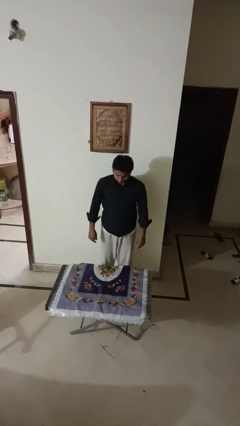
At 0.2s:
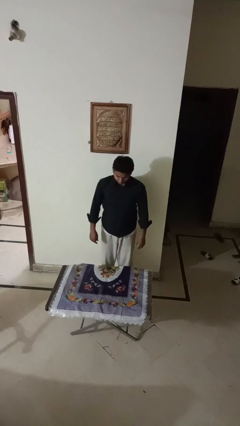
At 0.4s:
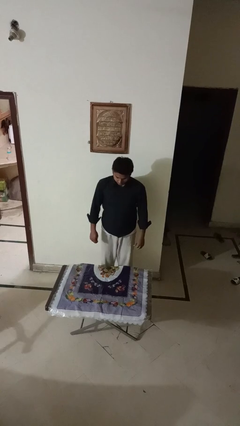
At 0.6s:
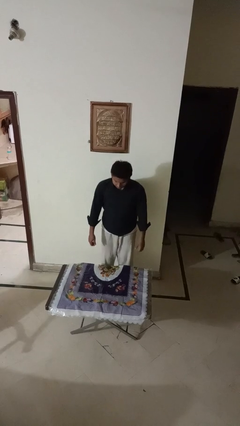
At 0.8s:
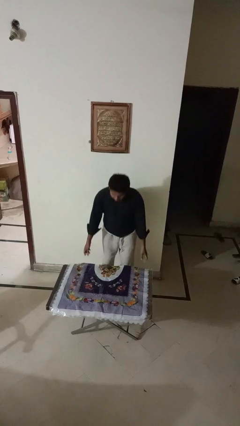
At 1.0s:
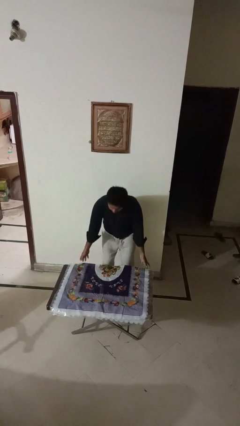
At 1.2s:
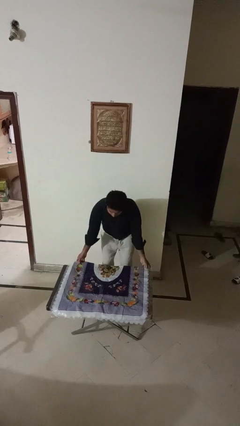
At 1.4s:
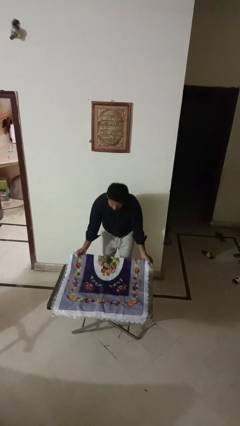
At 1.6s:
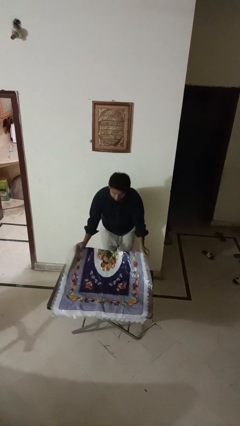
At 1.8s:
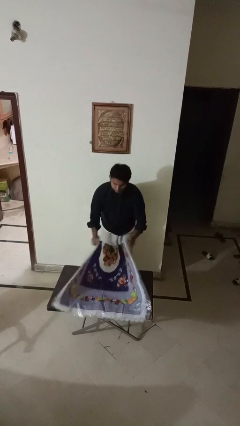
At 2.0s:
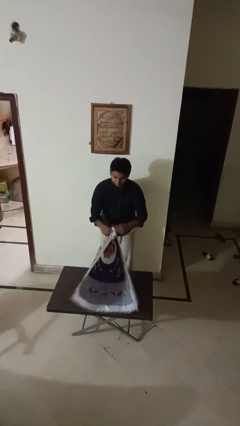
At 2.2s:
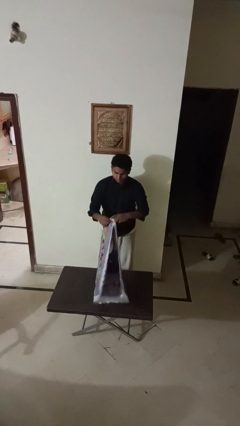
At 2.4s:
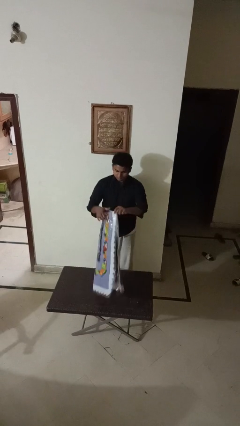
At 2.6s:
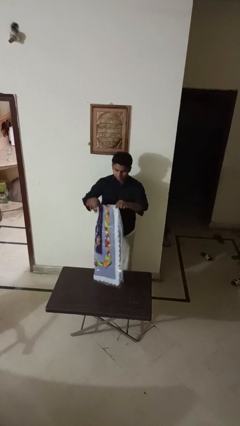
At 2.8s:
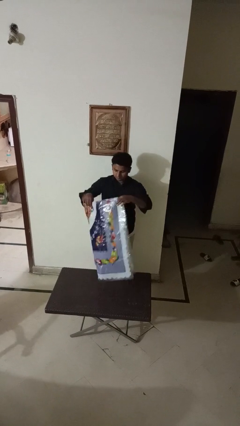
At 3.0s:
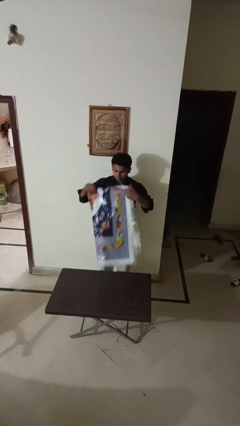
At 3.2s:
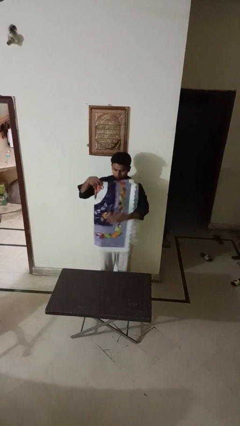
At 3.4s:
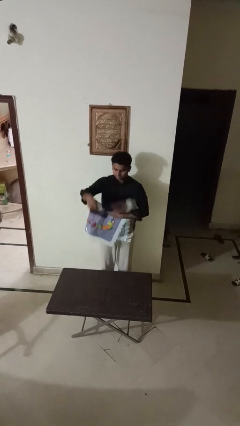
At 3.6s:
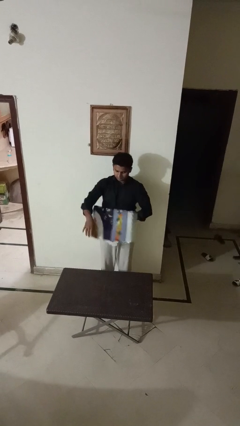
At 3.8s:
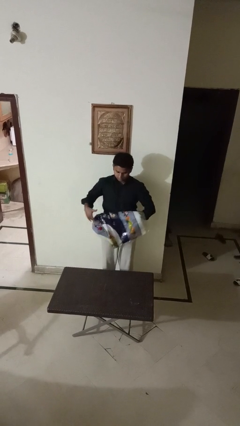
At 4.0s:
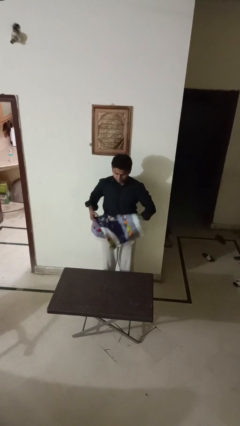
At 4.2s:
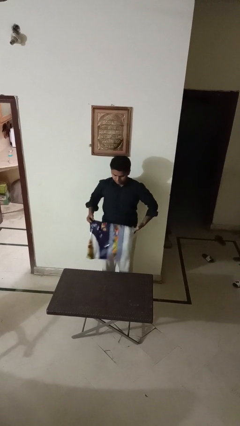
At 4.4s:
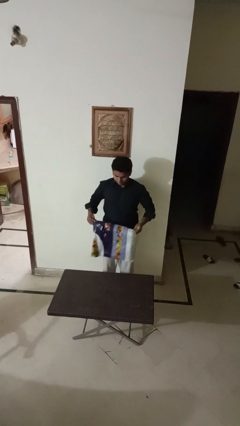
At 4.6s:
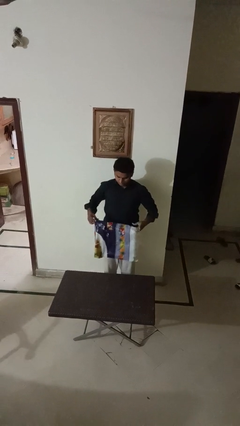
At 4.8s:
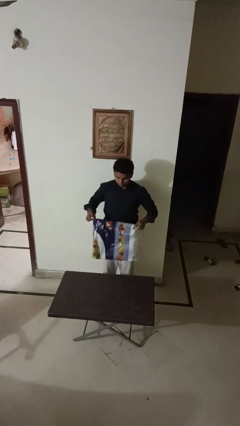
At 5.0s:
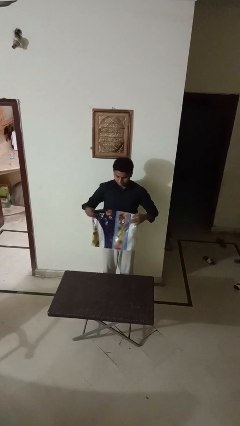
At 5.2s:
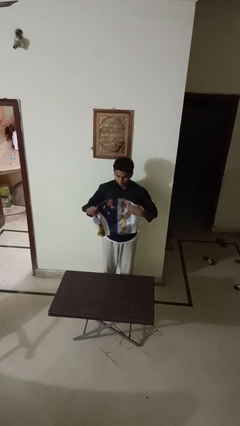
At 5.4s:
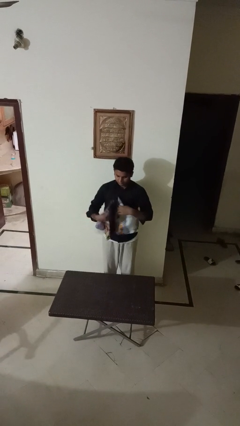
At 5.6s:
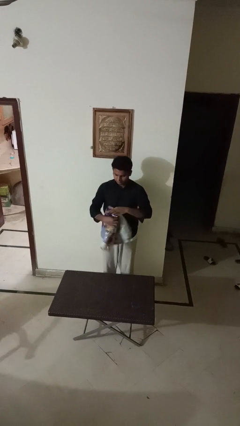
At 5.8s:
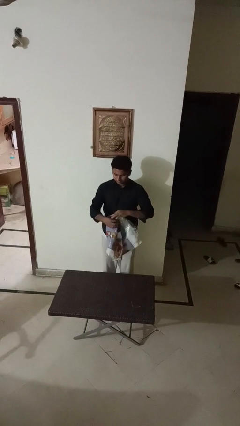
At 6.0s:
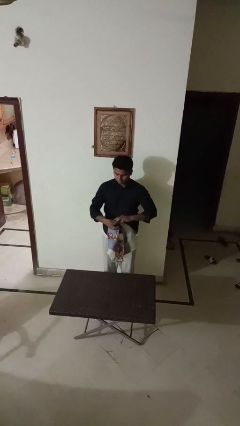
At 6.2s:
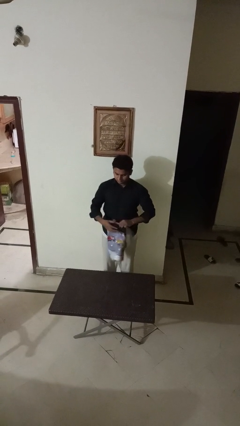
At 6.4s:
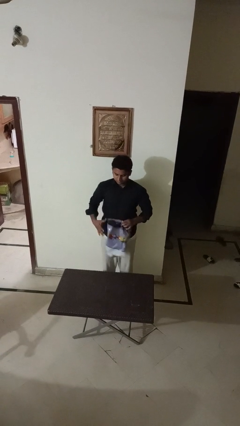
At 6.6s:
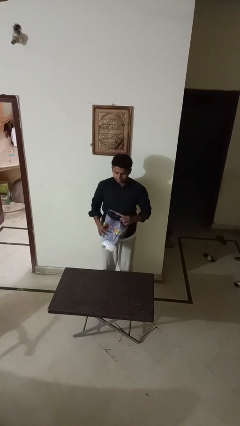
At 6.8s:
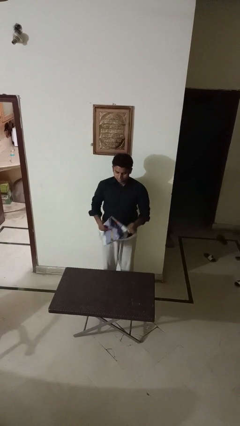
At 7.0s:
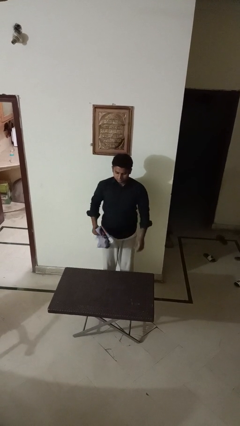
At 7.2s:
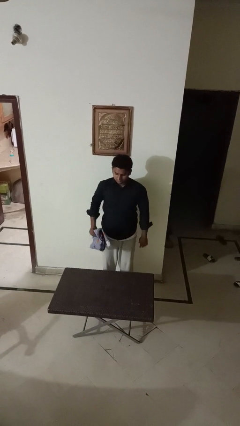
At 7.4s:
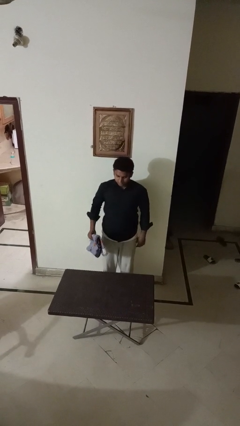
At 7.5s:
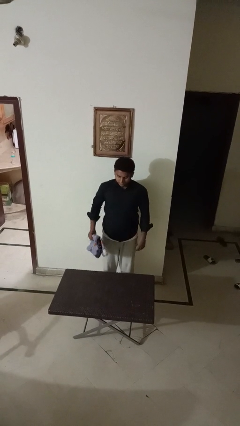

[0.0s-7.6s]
person folds tablecloth

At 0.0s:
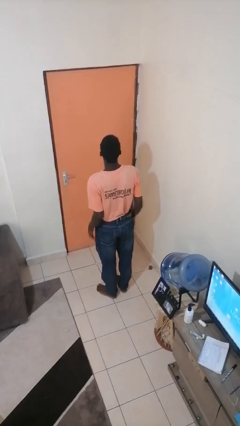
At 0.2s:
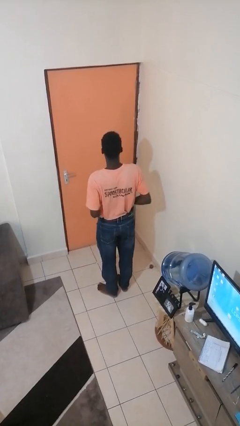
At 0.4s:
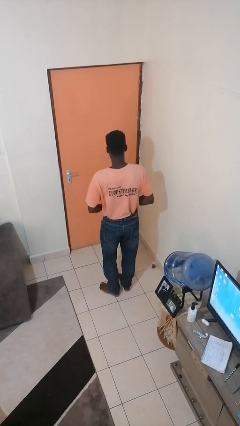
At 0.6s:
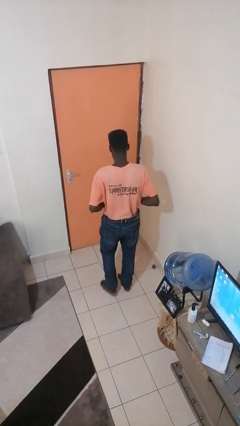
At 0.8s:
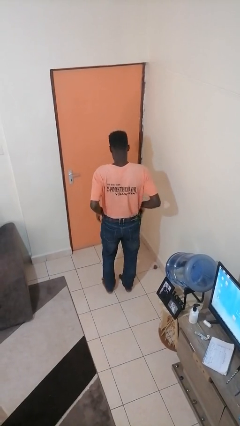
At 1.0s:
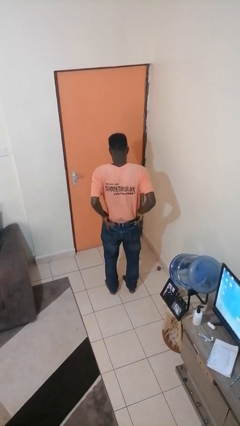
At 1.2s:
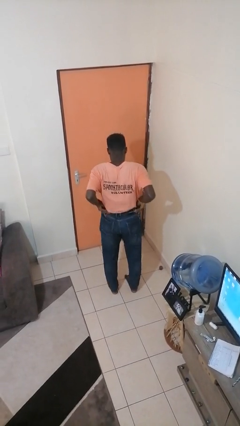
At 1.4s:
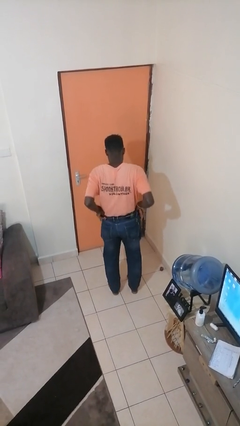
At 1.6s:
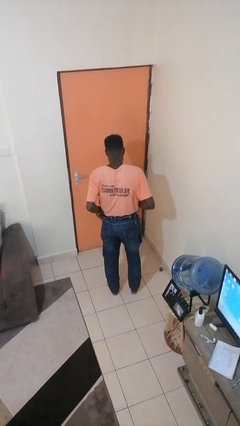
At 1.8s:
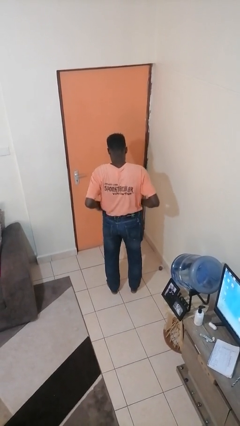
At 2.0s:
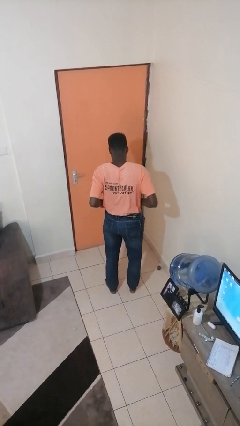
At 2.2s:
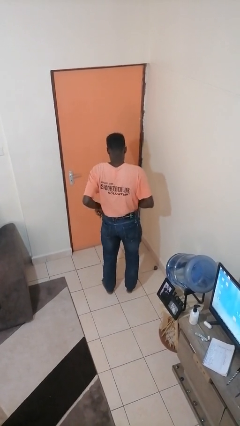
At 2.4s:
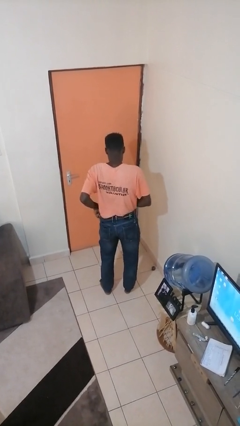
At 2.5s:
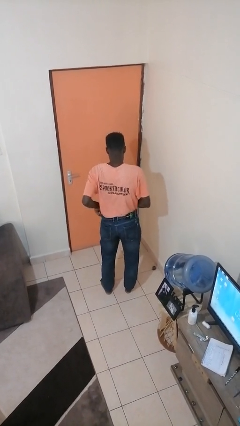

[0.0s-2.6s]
person hikes up pants

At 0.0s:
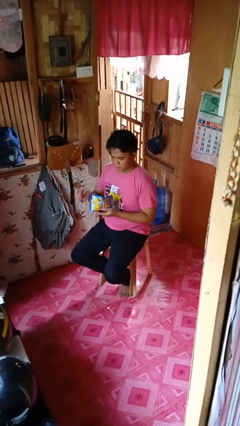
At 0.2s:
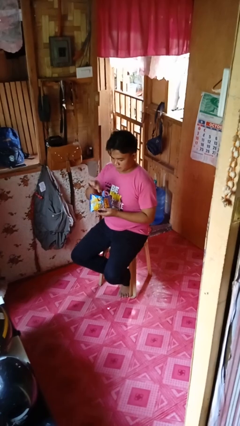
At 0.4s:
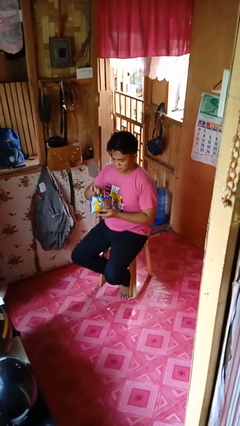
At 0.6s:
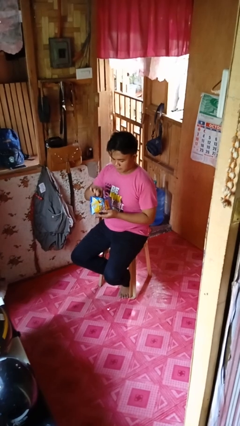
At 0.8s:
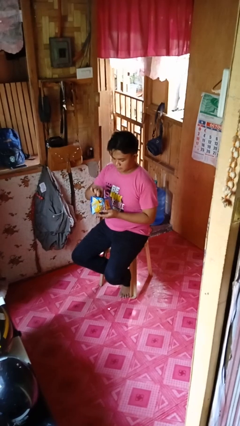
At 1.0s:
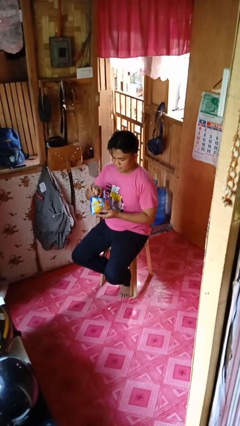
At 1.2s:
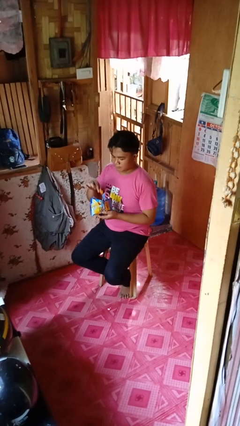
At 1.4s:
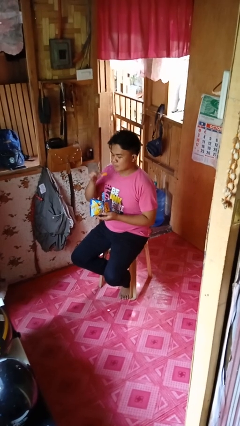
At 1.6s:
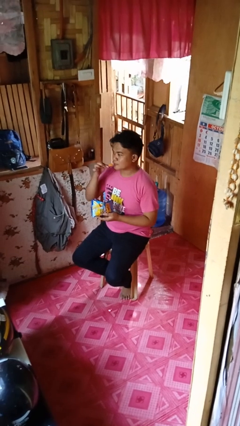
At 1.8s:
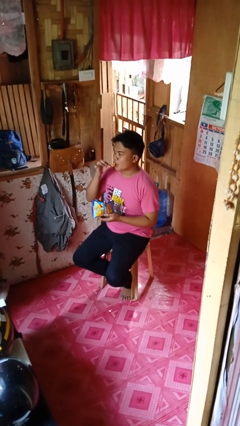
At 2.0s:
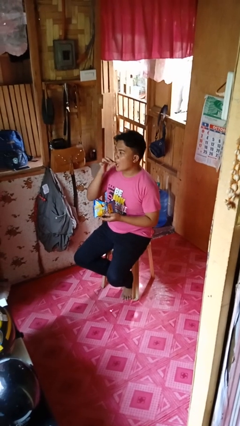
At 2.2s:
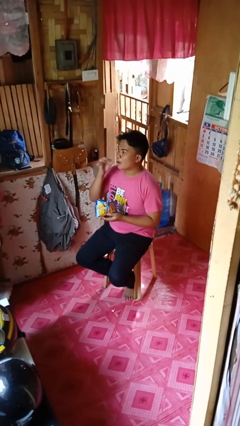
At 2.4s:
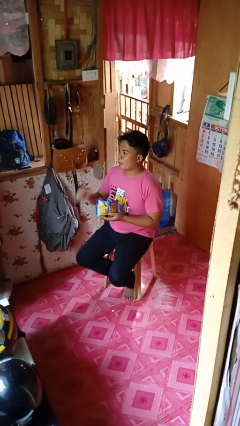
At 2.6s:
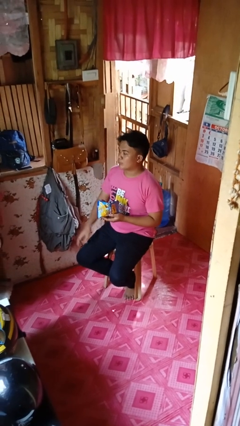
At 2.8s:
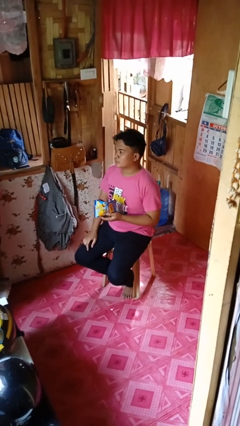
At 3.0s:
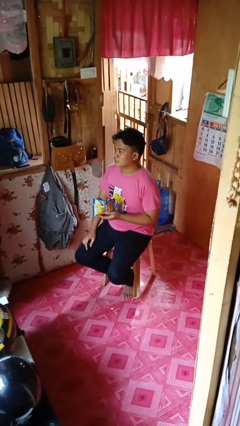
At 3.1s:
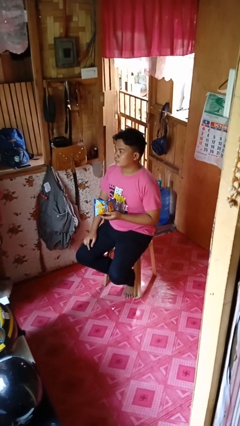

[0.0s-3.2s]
person eats snack from bag

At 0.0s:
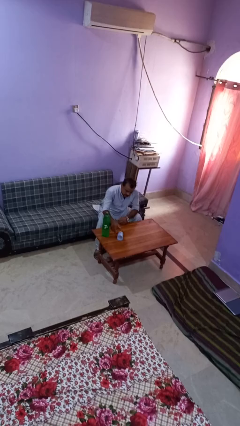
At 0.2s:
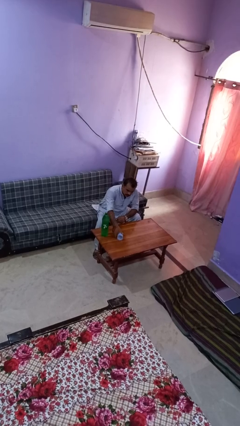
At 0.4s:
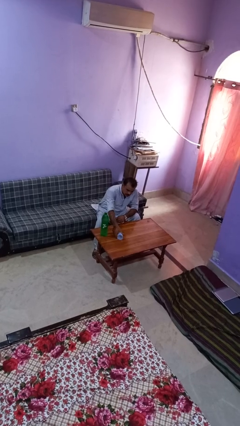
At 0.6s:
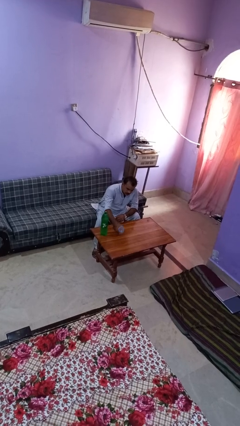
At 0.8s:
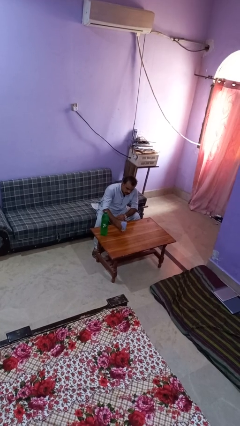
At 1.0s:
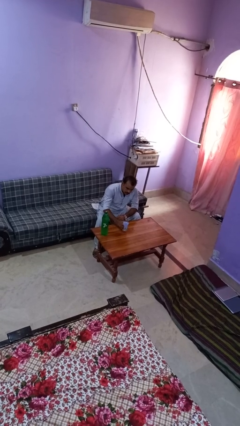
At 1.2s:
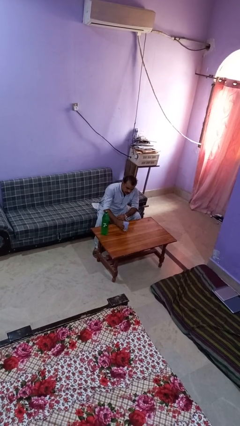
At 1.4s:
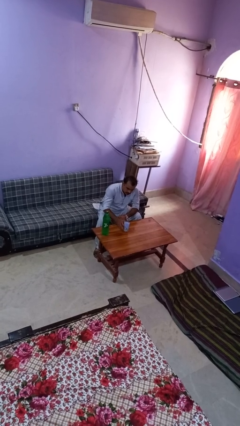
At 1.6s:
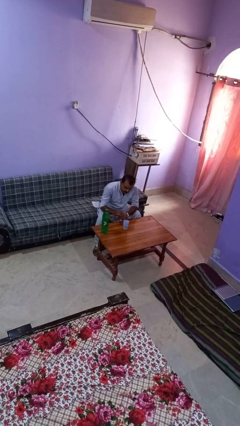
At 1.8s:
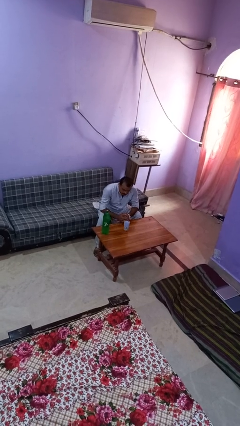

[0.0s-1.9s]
person sets upright glass

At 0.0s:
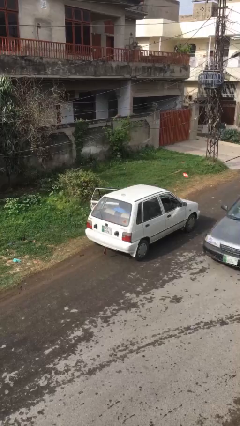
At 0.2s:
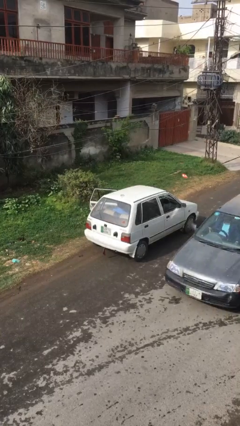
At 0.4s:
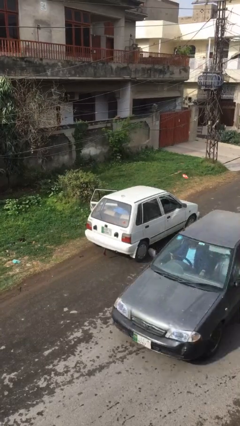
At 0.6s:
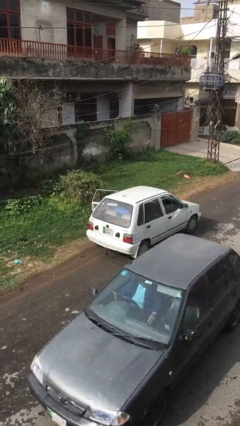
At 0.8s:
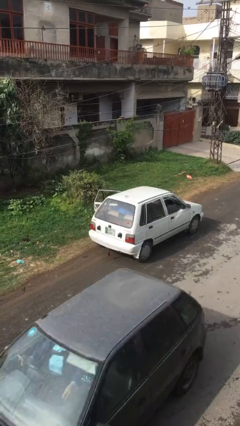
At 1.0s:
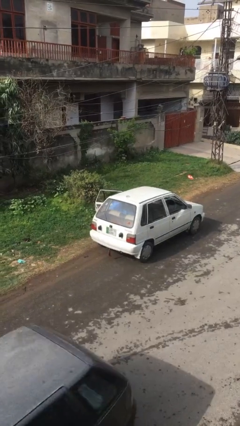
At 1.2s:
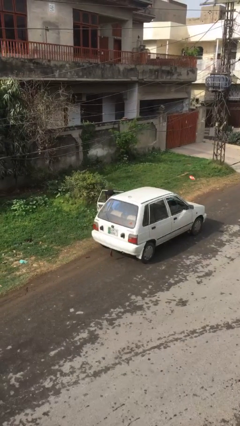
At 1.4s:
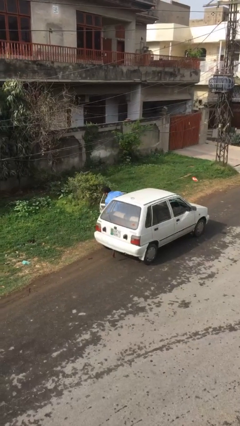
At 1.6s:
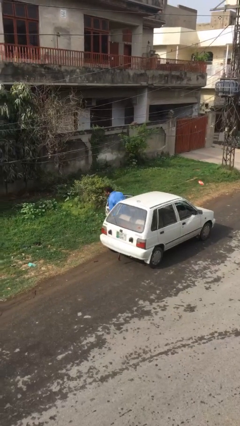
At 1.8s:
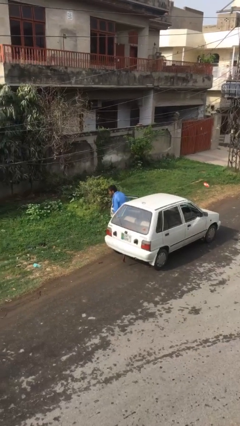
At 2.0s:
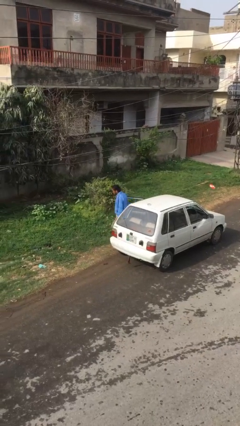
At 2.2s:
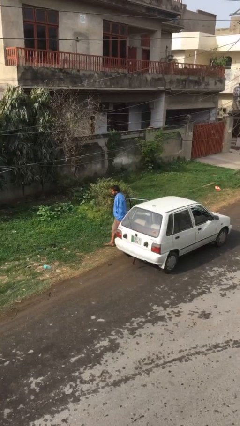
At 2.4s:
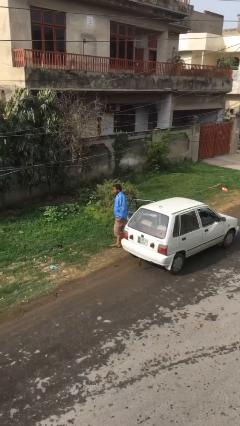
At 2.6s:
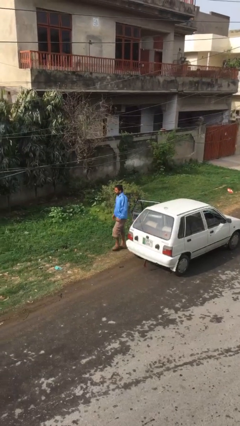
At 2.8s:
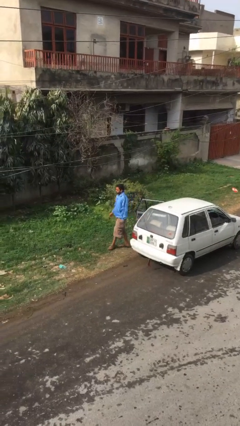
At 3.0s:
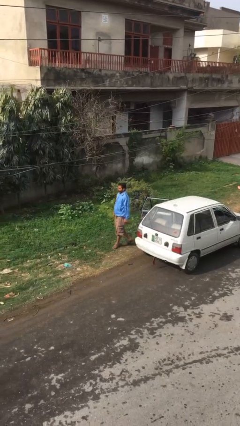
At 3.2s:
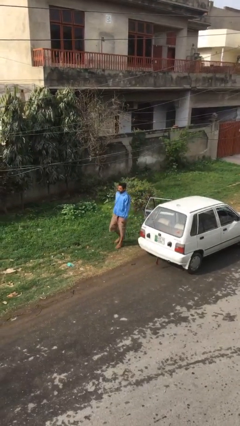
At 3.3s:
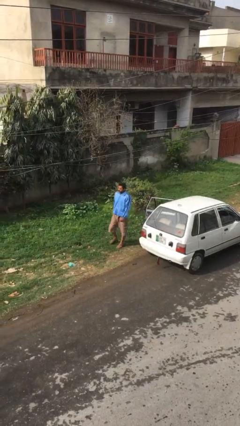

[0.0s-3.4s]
person exits car
